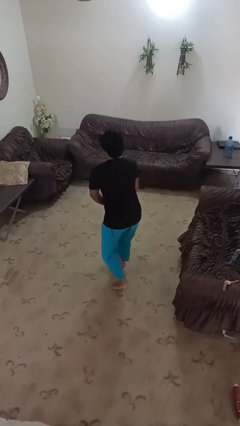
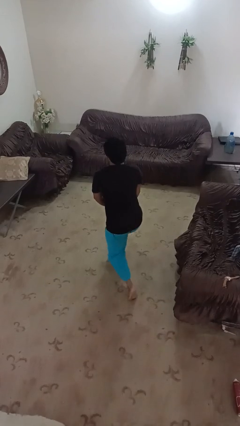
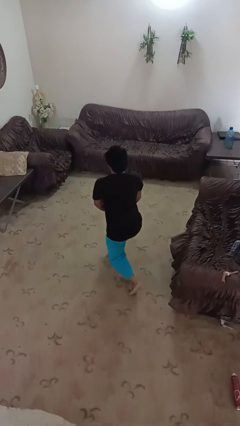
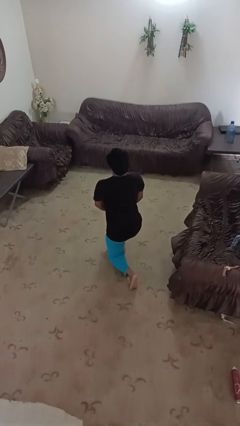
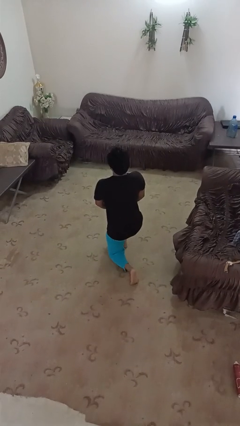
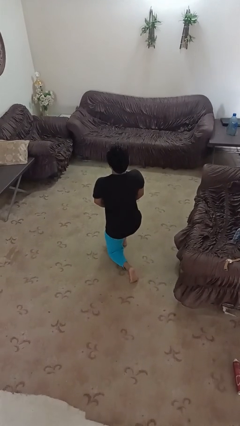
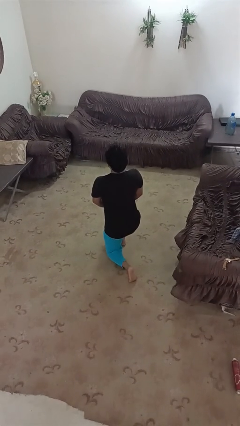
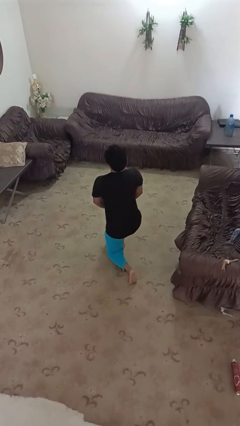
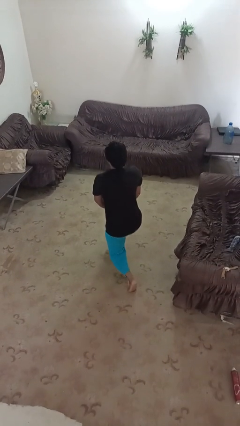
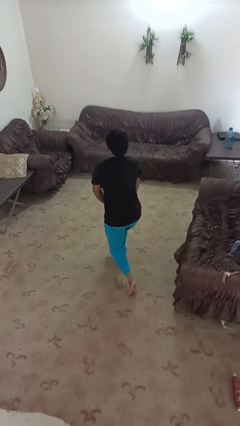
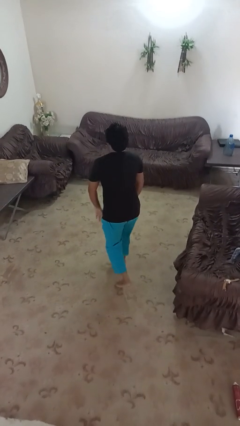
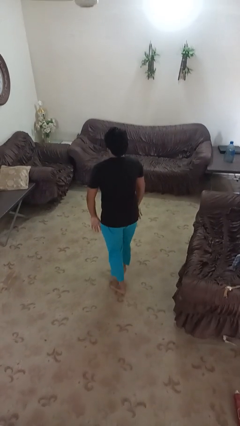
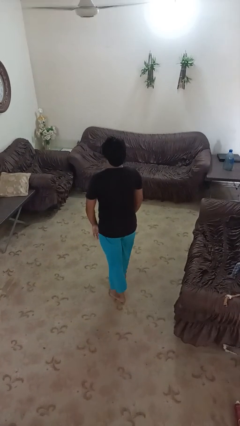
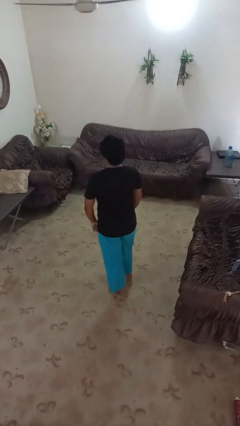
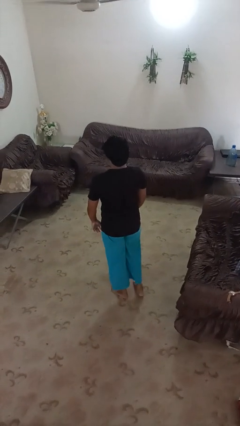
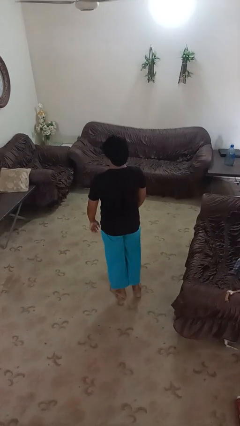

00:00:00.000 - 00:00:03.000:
person exercises with lunges

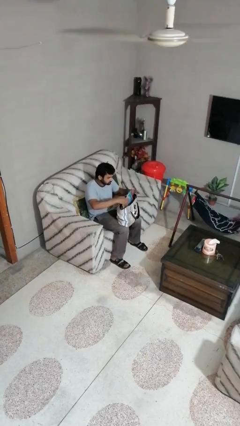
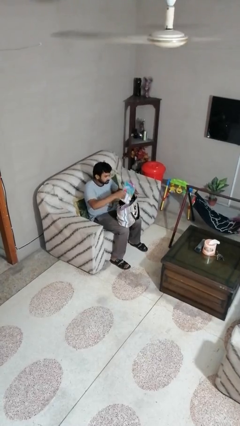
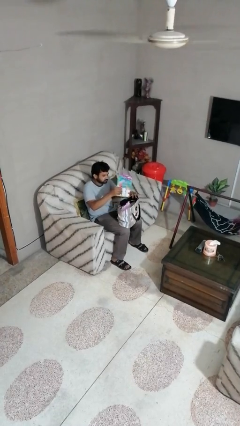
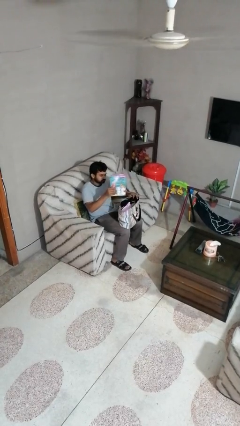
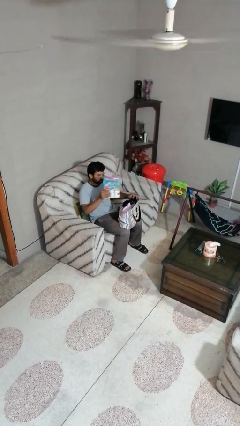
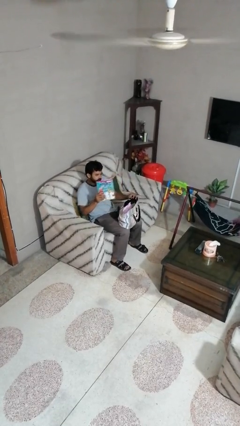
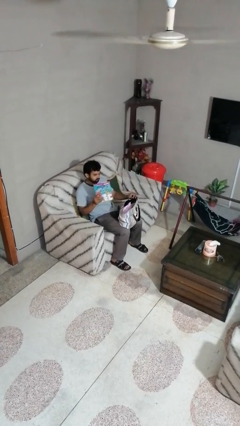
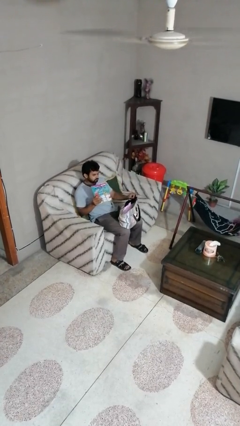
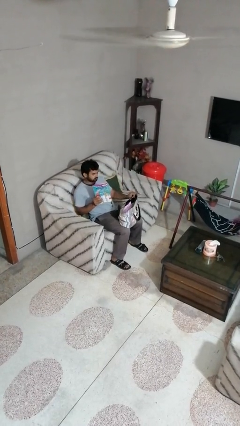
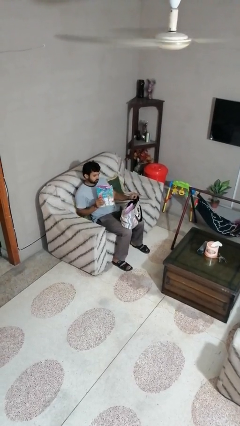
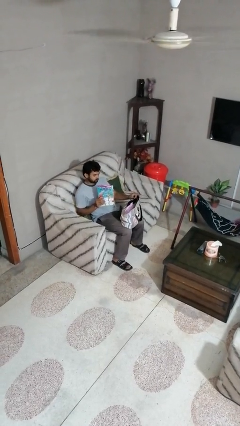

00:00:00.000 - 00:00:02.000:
person takes object from backpack

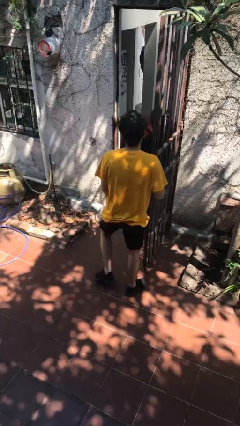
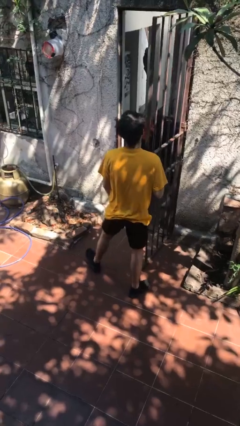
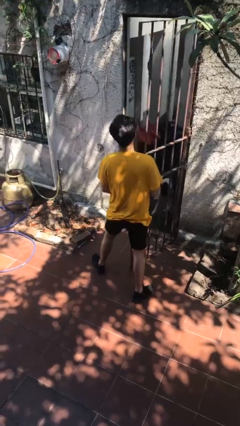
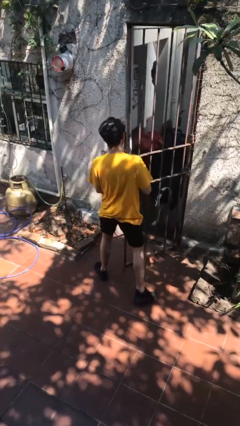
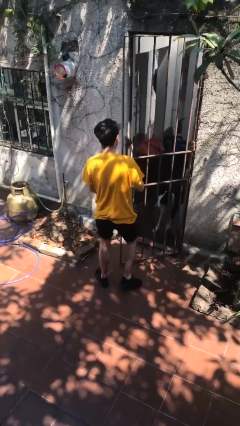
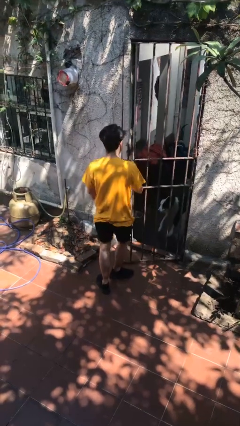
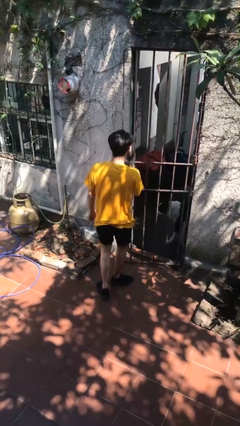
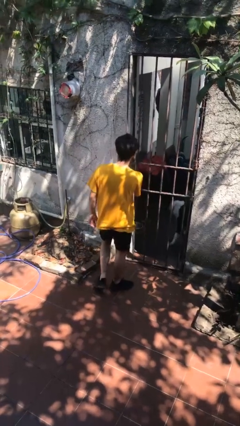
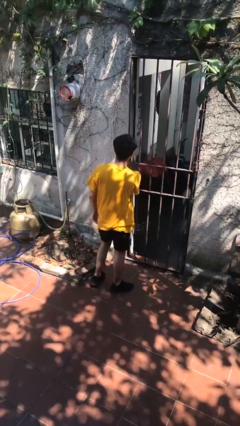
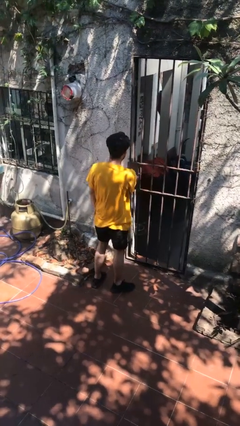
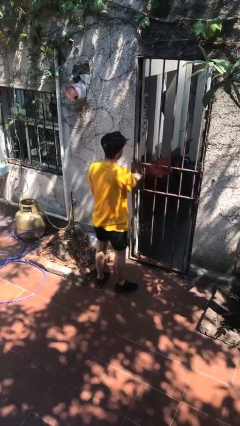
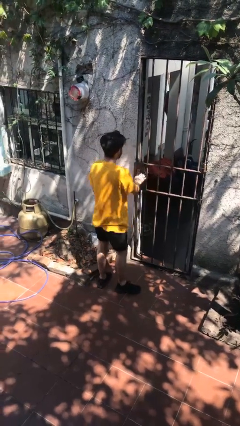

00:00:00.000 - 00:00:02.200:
person closes facility door

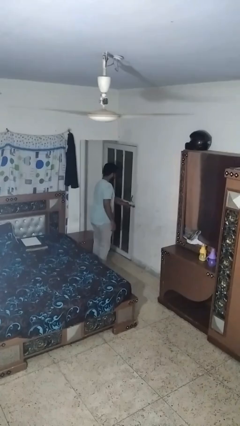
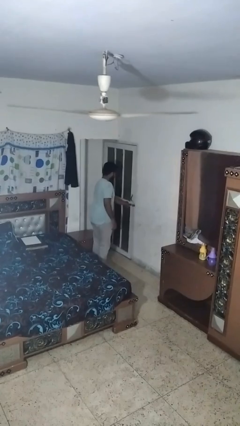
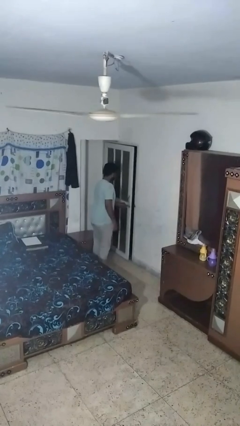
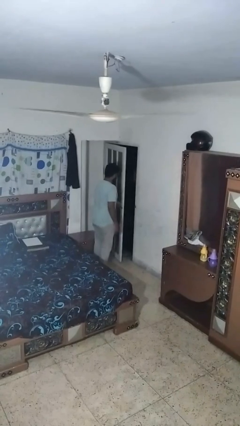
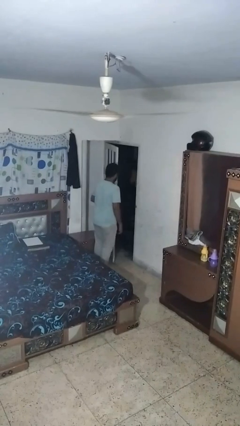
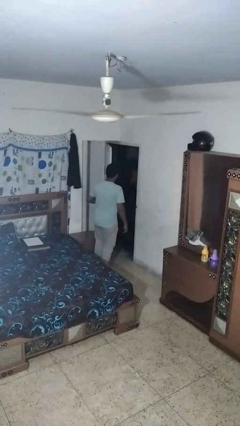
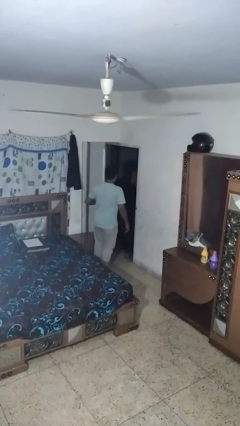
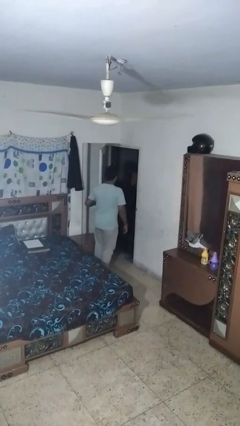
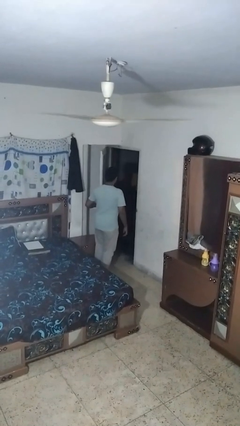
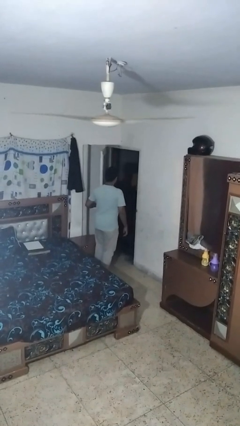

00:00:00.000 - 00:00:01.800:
person opens facility door

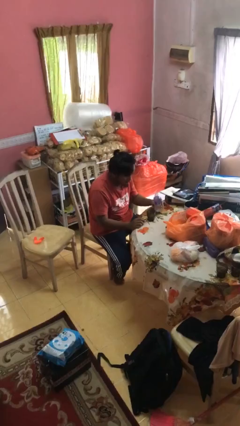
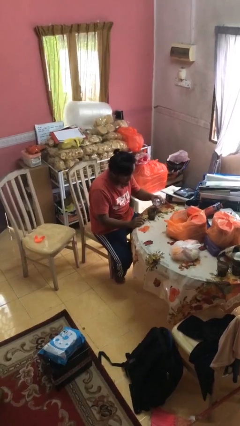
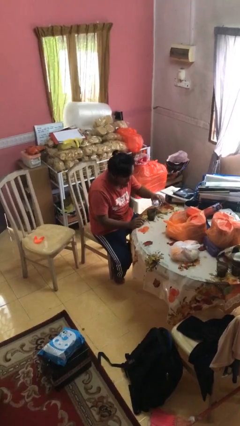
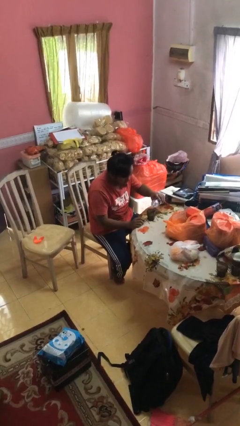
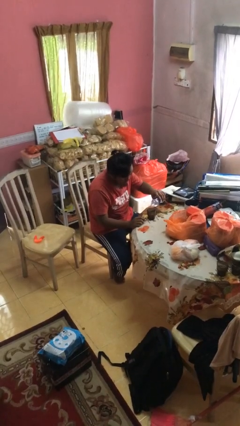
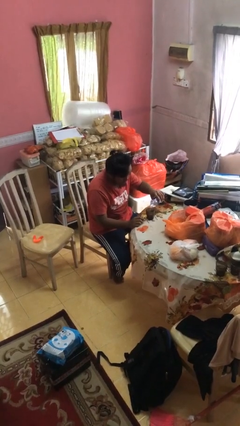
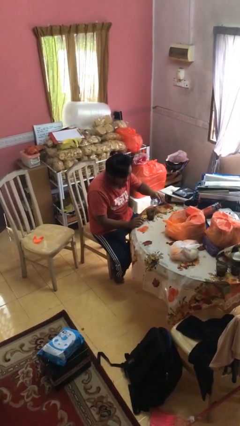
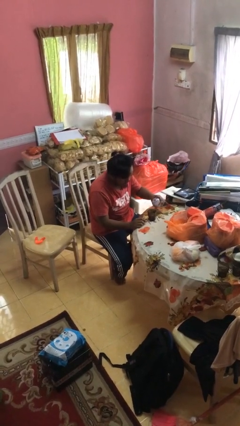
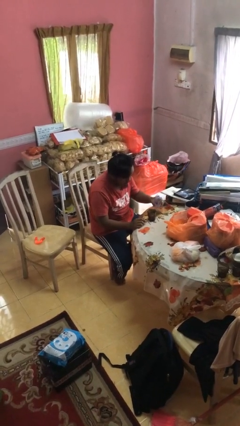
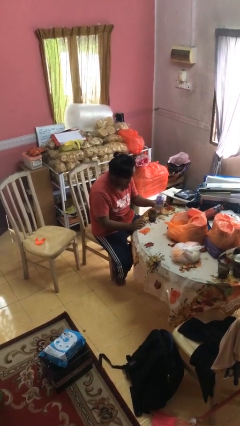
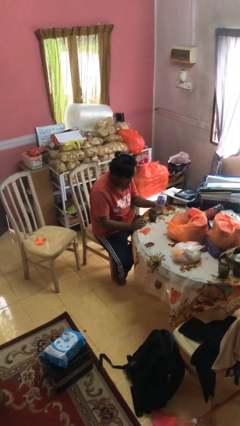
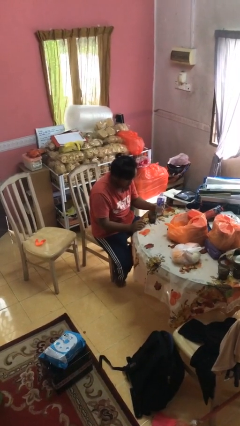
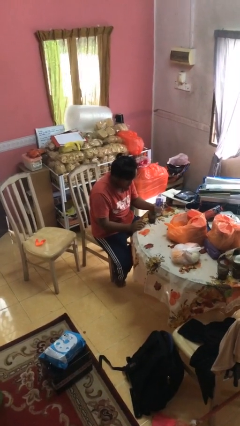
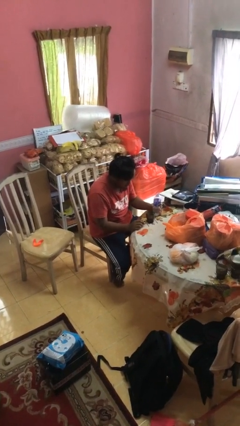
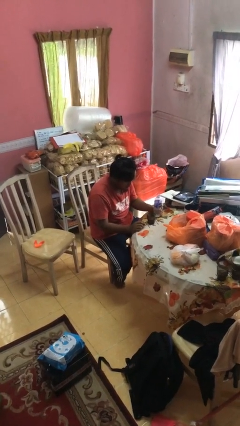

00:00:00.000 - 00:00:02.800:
person pours liquid into cup

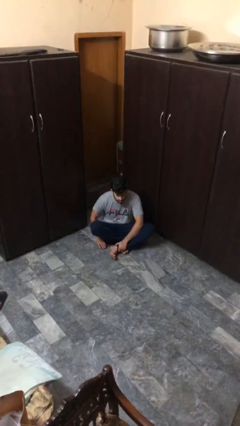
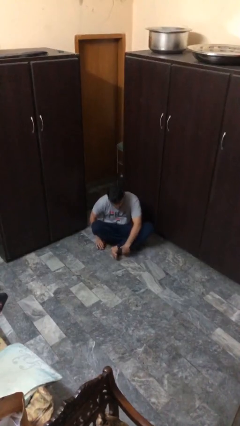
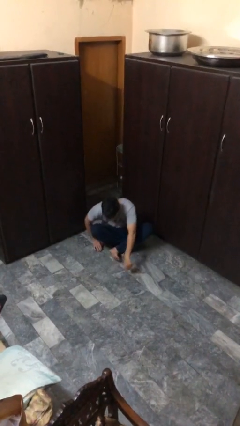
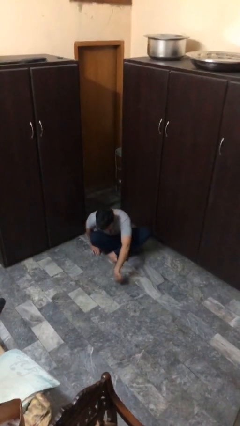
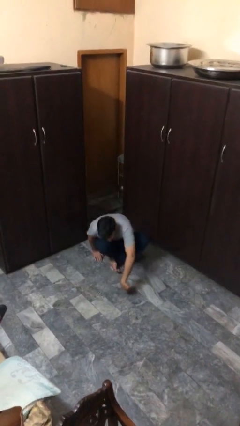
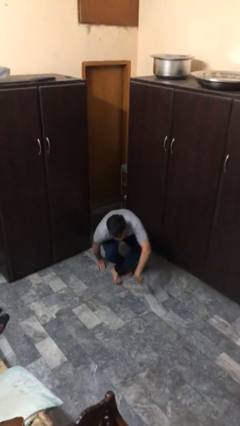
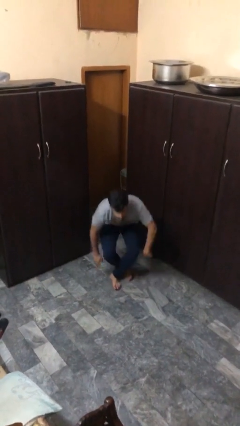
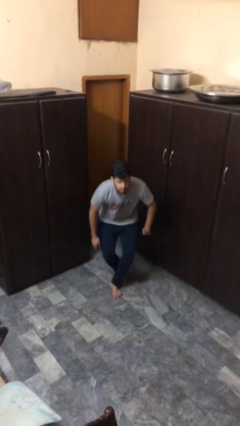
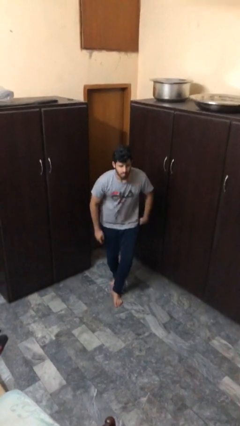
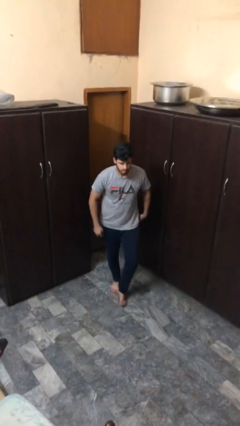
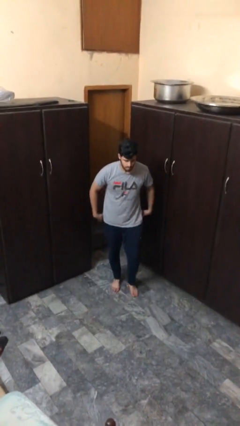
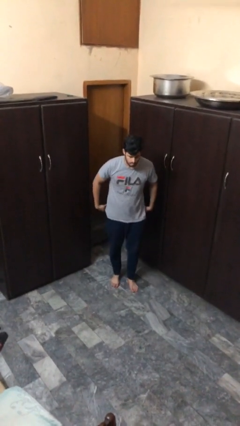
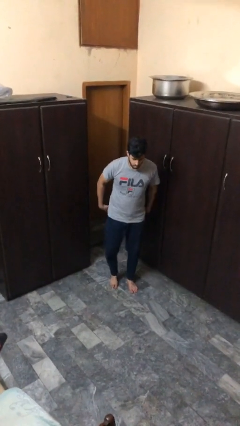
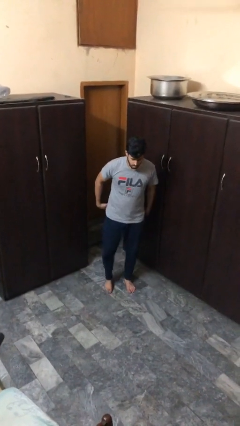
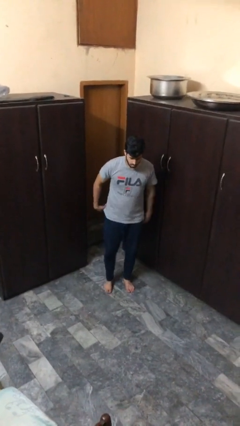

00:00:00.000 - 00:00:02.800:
person stands up from floor

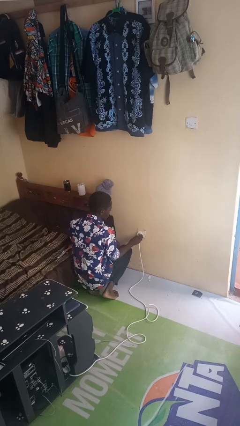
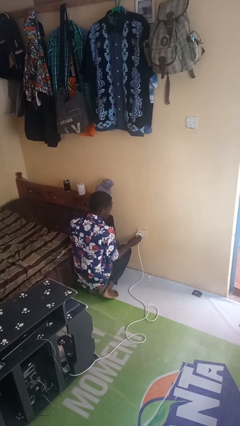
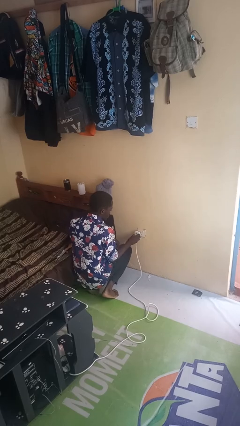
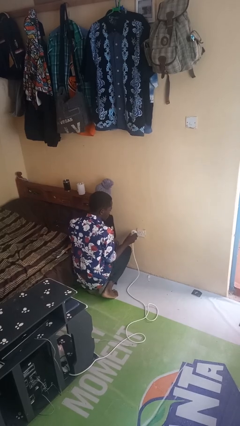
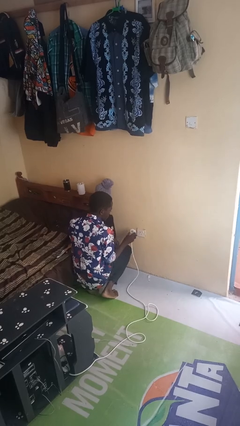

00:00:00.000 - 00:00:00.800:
person unplugs from electrical socket

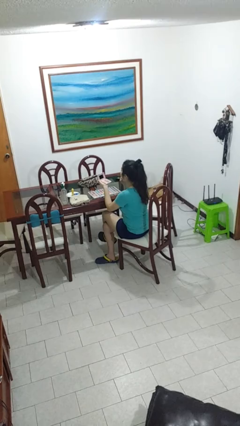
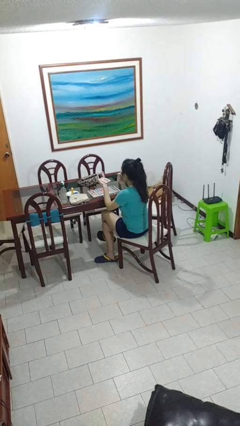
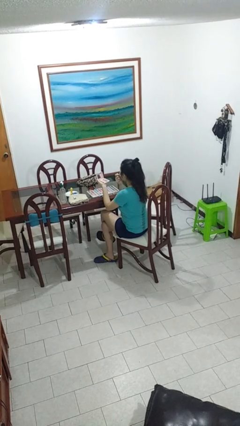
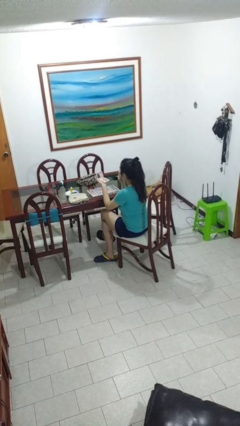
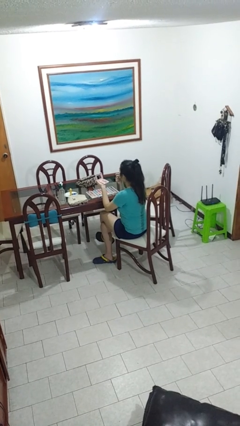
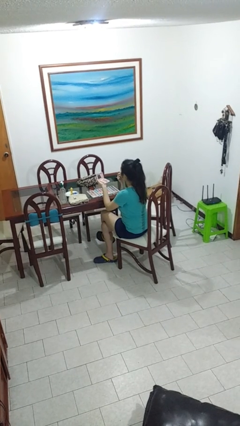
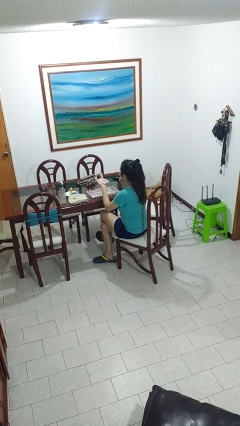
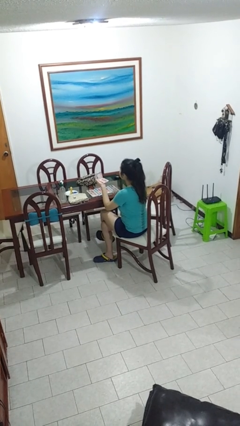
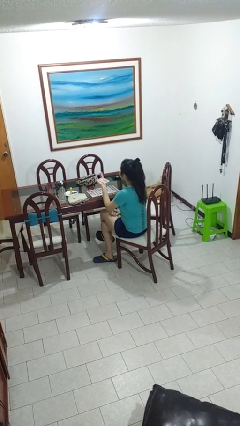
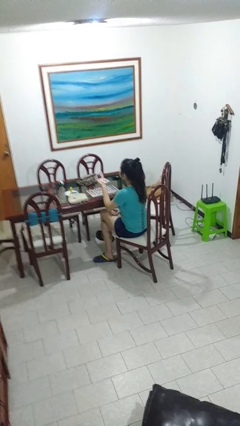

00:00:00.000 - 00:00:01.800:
person applies lip makeup
